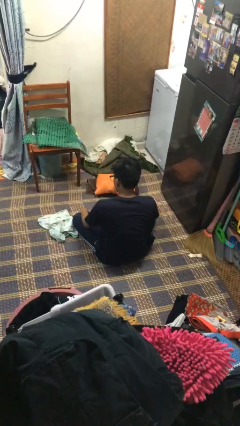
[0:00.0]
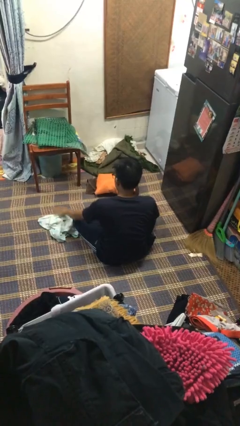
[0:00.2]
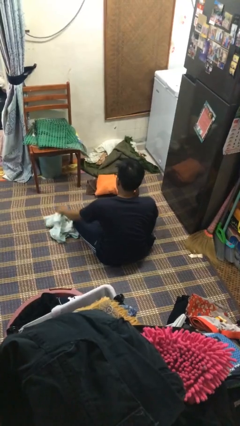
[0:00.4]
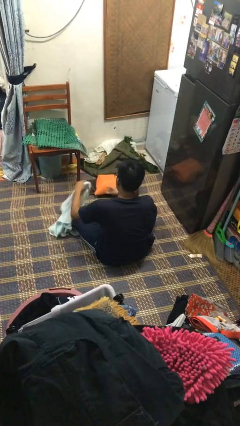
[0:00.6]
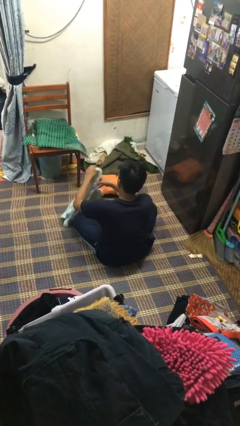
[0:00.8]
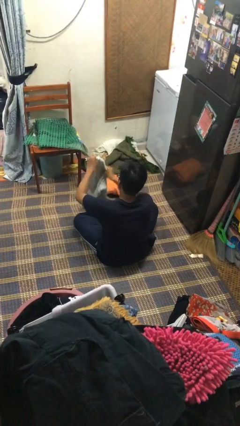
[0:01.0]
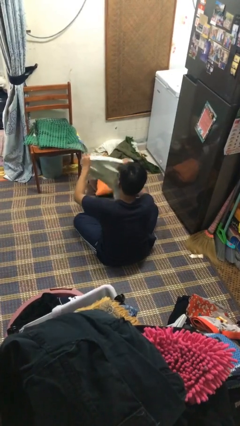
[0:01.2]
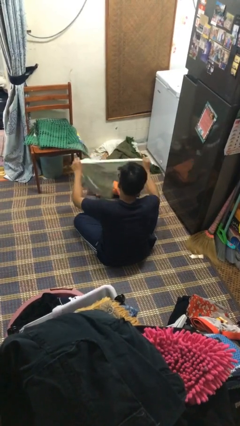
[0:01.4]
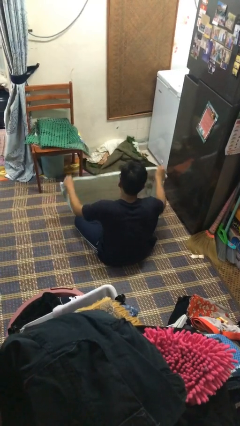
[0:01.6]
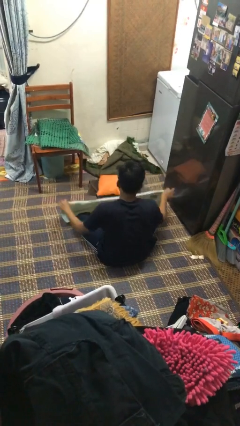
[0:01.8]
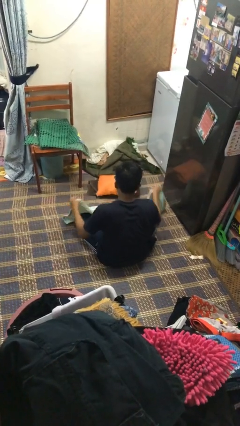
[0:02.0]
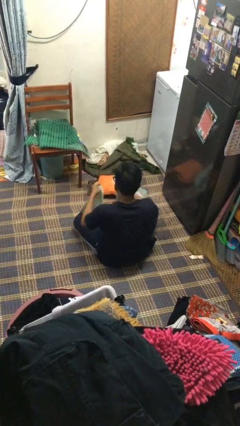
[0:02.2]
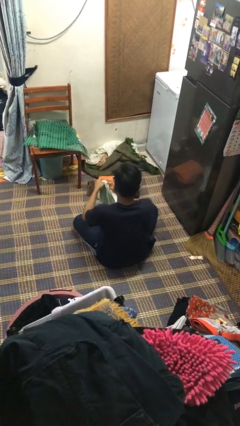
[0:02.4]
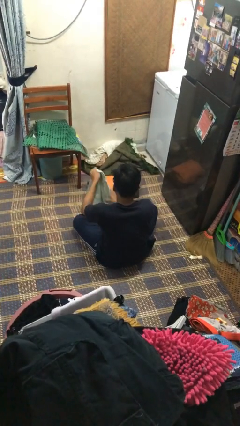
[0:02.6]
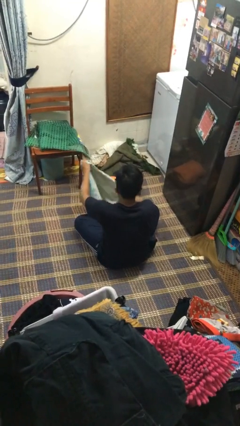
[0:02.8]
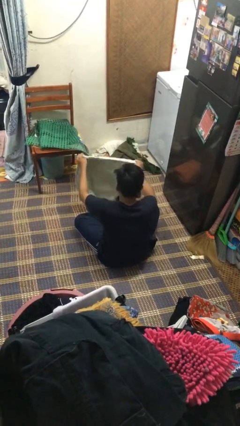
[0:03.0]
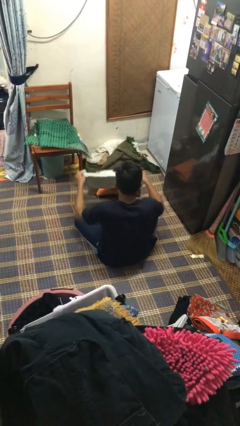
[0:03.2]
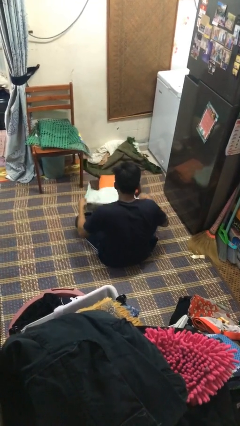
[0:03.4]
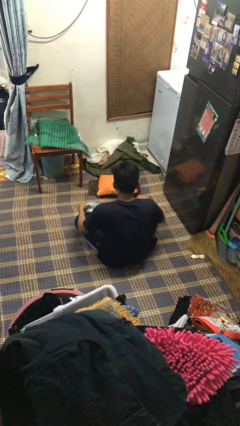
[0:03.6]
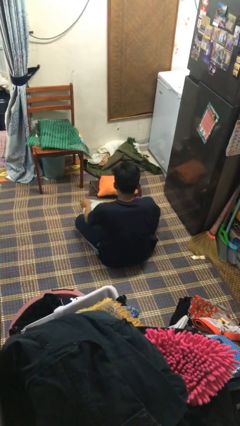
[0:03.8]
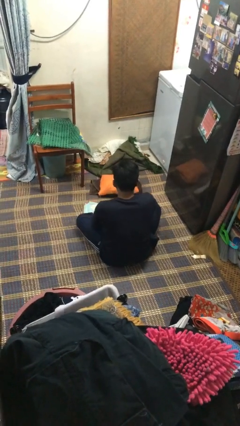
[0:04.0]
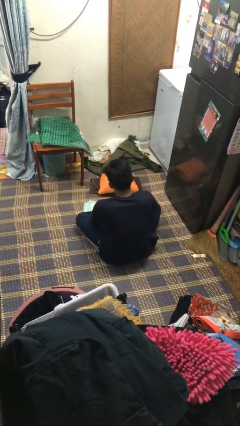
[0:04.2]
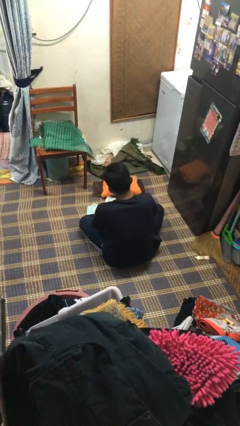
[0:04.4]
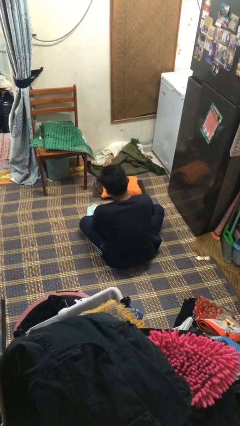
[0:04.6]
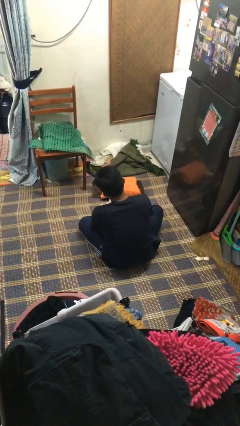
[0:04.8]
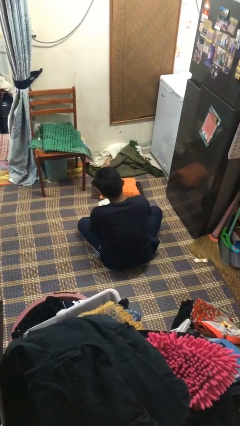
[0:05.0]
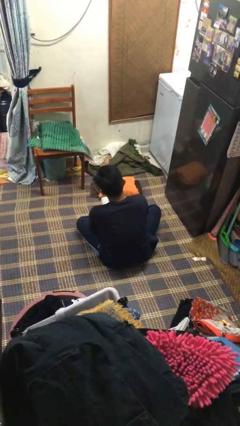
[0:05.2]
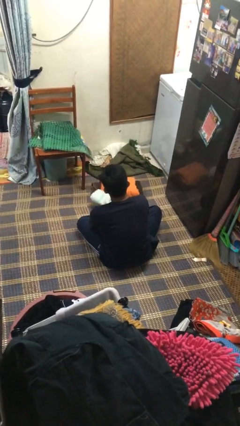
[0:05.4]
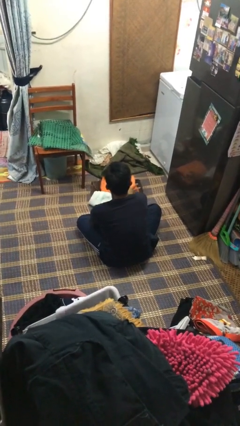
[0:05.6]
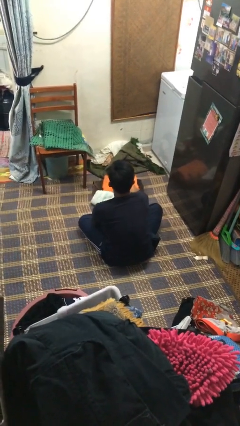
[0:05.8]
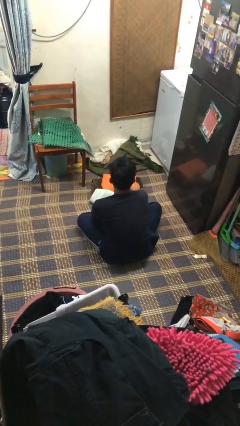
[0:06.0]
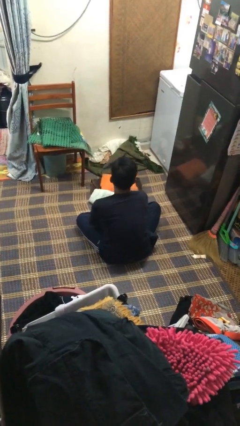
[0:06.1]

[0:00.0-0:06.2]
person folds towel

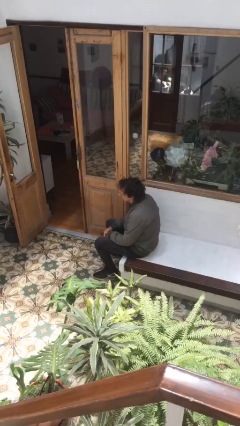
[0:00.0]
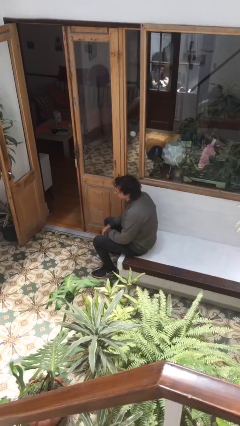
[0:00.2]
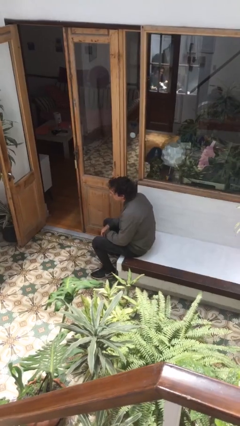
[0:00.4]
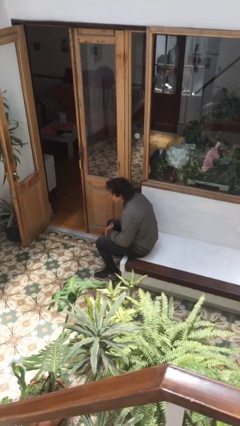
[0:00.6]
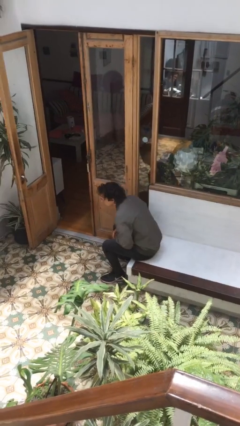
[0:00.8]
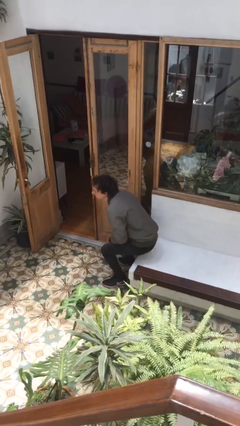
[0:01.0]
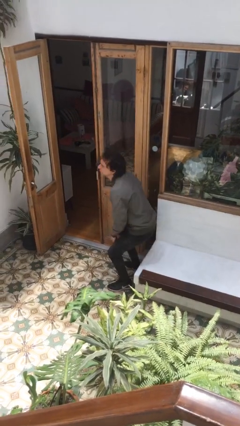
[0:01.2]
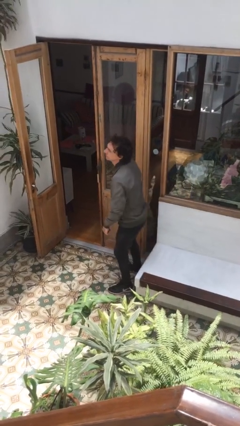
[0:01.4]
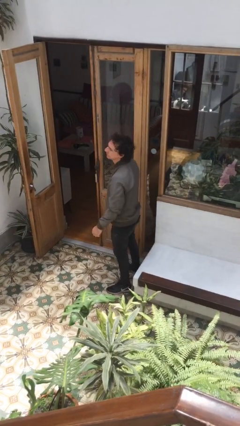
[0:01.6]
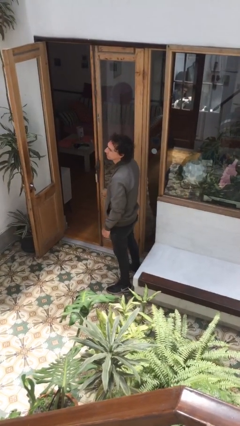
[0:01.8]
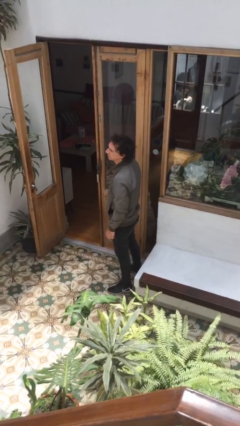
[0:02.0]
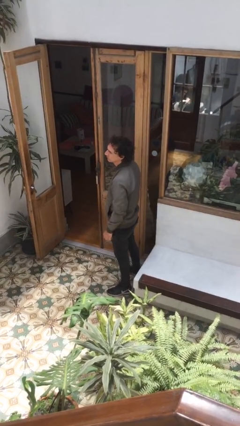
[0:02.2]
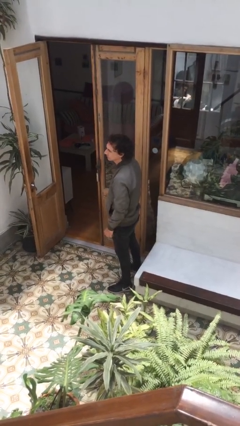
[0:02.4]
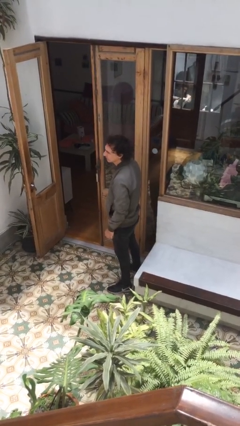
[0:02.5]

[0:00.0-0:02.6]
person stands up

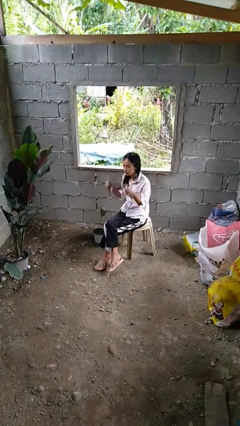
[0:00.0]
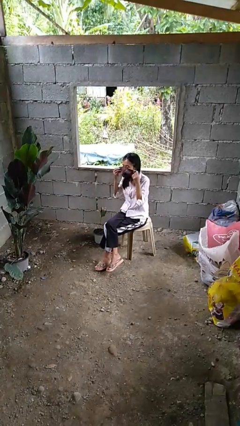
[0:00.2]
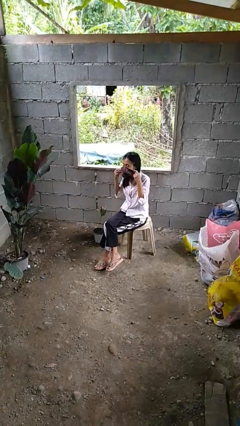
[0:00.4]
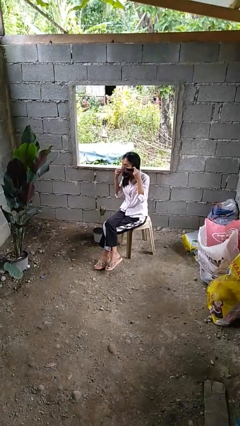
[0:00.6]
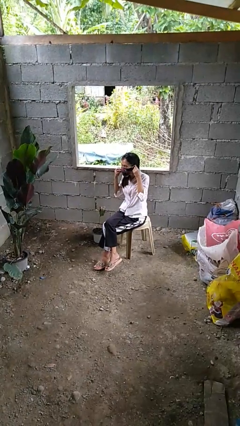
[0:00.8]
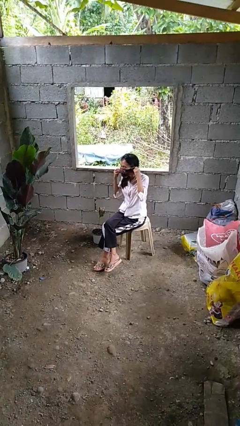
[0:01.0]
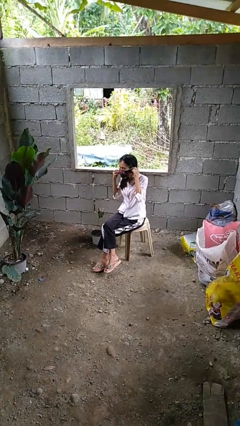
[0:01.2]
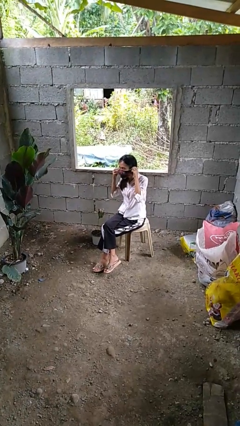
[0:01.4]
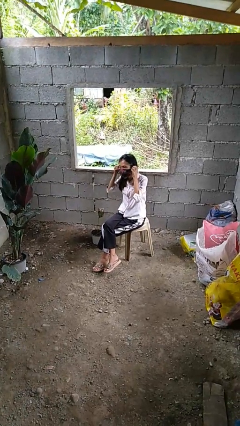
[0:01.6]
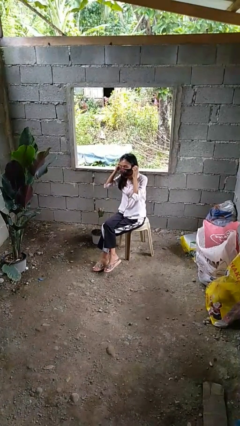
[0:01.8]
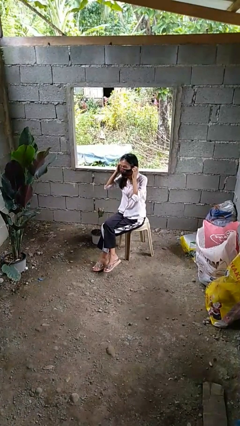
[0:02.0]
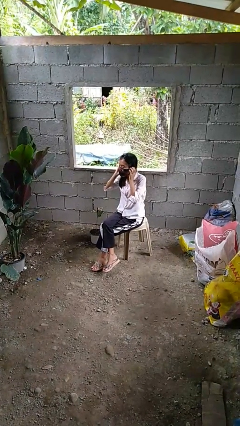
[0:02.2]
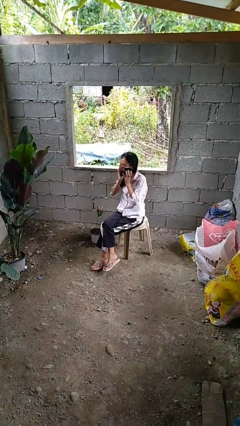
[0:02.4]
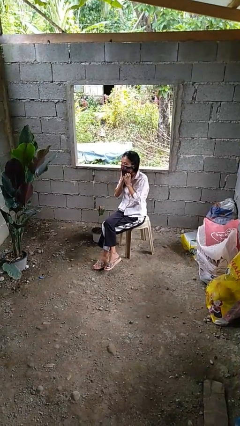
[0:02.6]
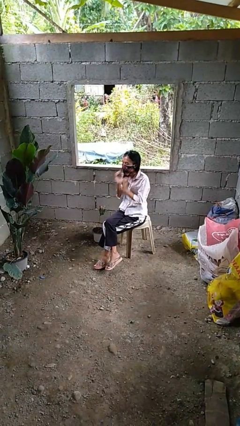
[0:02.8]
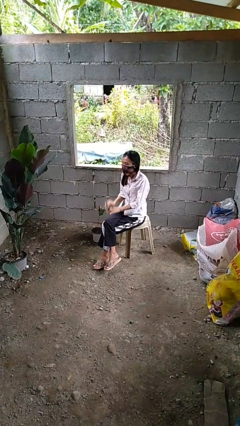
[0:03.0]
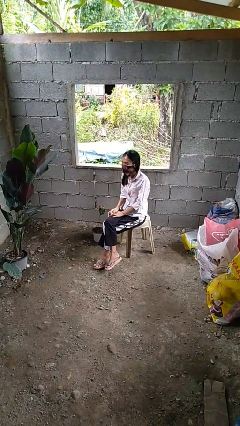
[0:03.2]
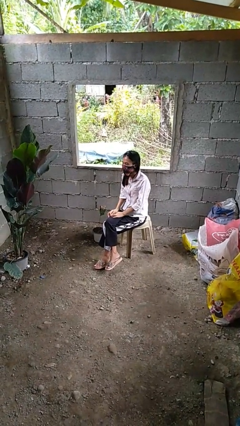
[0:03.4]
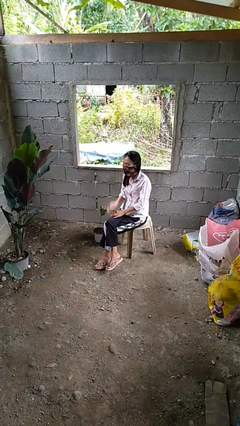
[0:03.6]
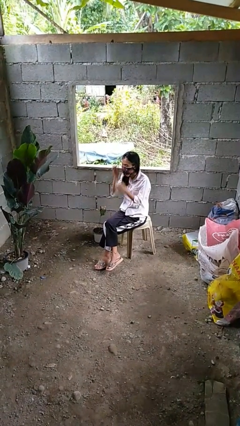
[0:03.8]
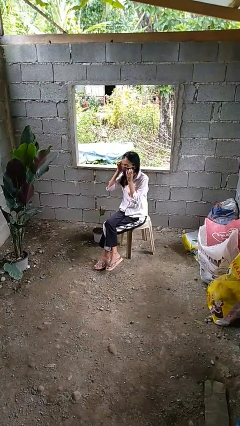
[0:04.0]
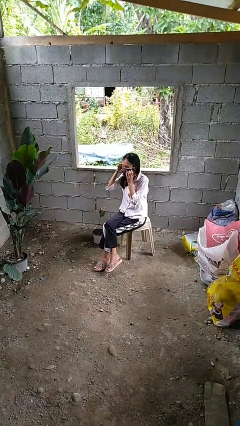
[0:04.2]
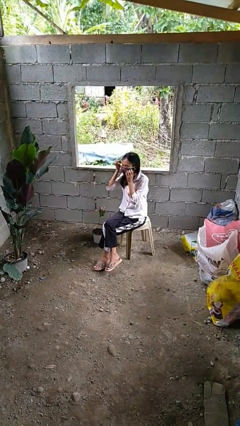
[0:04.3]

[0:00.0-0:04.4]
person puts on facemask

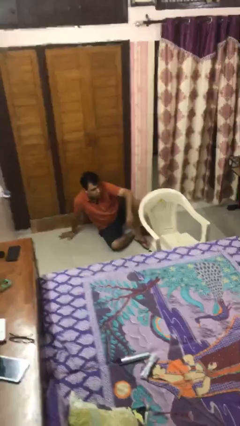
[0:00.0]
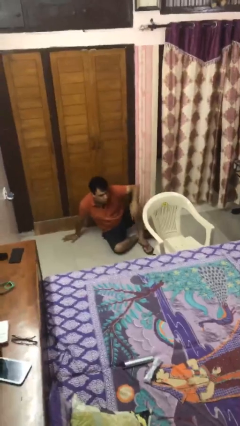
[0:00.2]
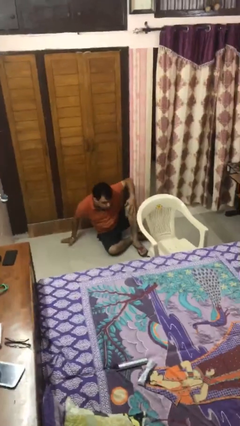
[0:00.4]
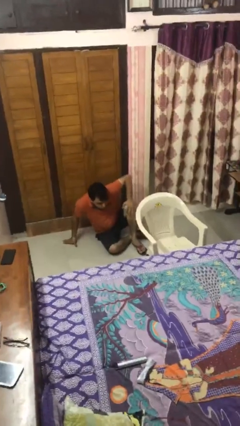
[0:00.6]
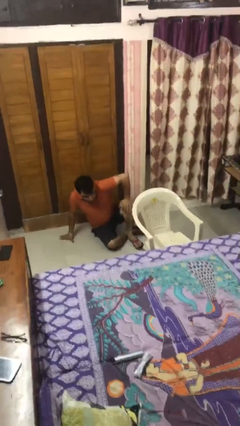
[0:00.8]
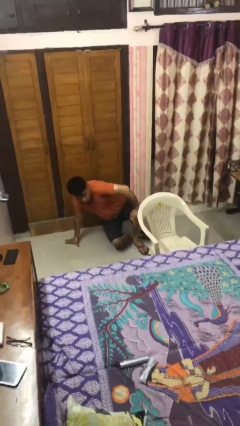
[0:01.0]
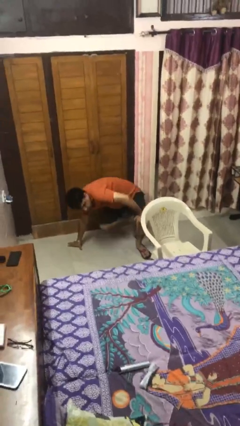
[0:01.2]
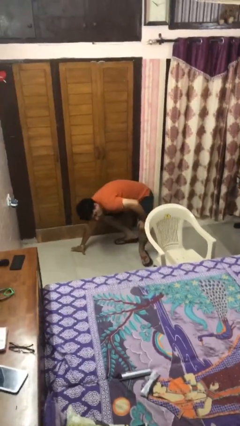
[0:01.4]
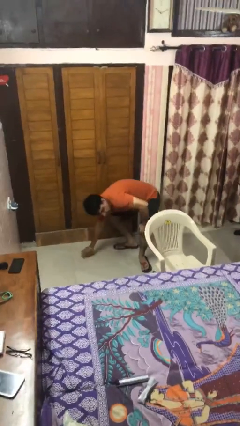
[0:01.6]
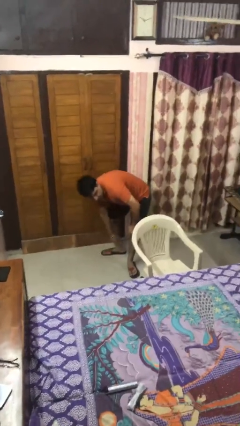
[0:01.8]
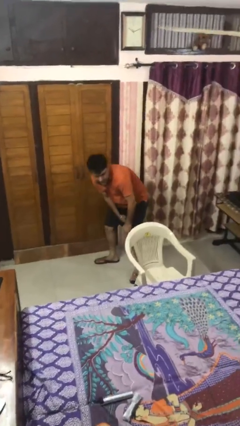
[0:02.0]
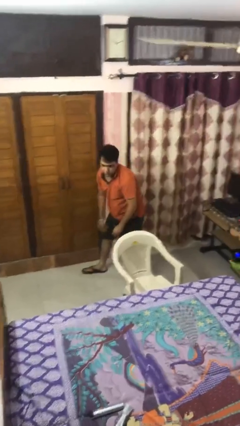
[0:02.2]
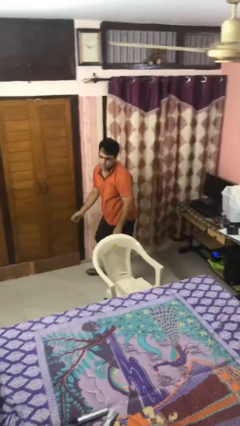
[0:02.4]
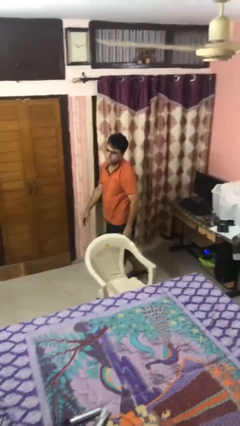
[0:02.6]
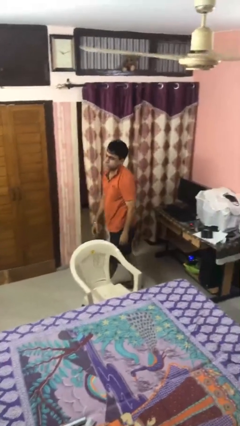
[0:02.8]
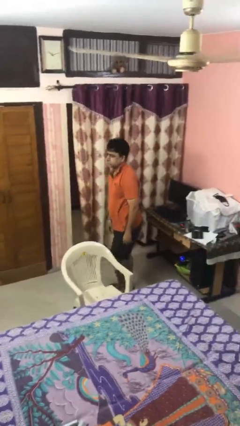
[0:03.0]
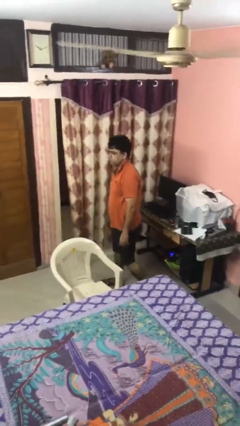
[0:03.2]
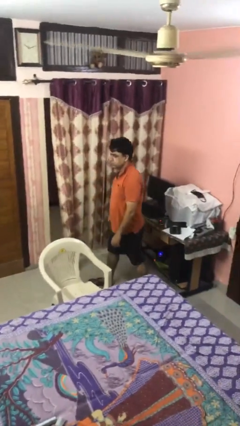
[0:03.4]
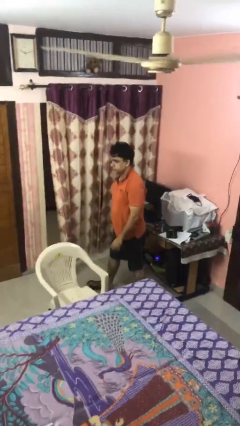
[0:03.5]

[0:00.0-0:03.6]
person stands up from floor

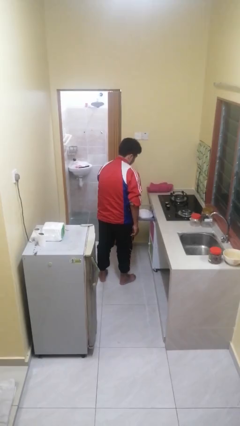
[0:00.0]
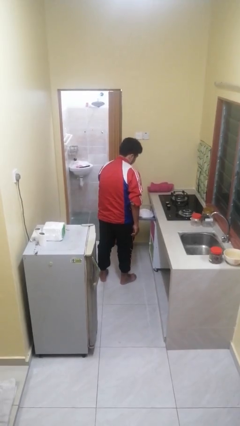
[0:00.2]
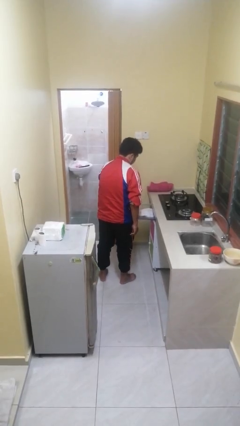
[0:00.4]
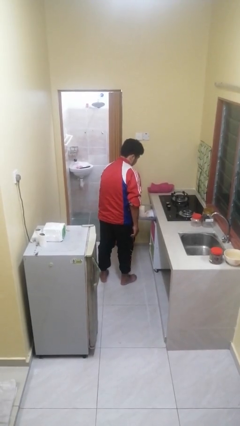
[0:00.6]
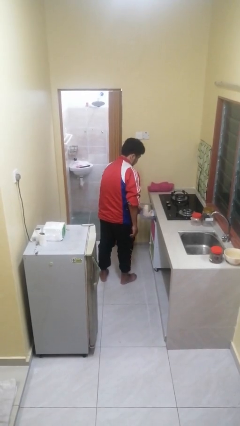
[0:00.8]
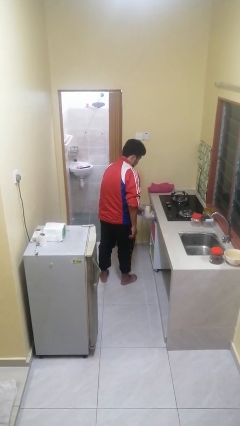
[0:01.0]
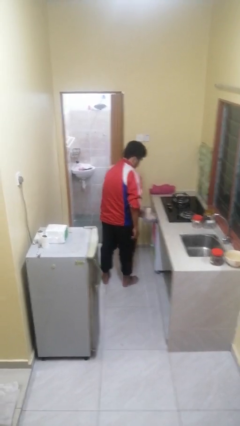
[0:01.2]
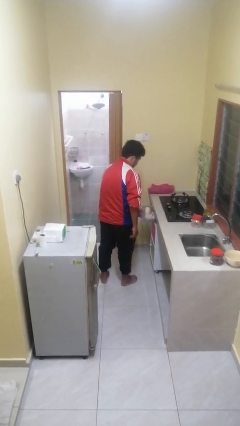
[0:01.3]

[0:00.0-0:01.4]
person closes kitchen drawer
